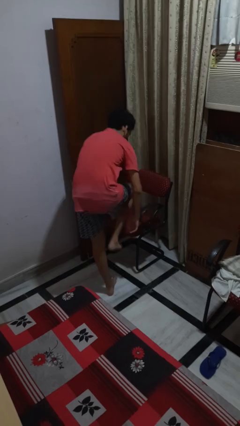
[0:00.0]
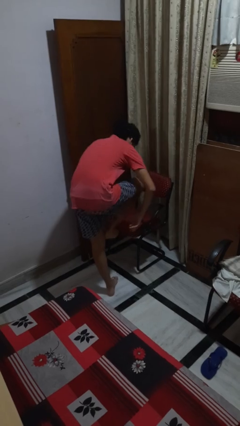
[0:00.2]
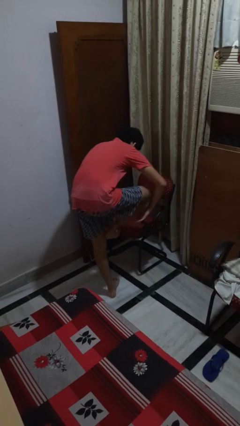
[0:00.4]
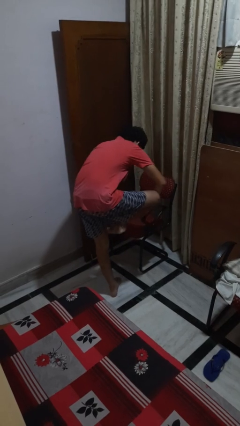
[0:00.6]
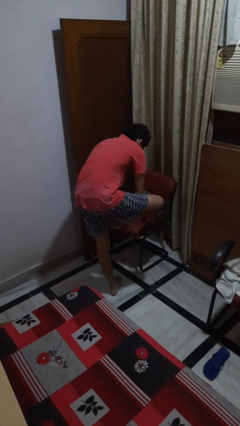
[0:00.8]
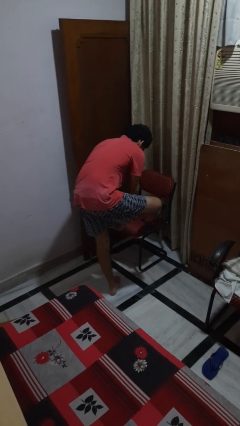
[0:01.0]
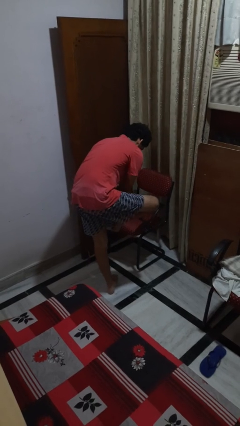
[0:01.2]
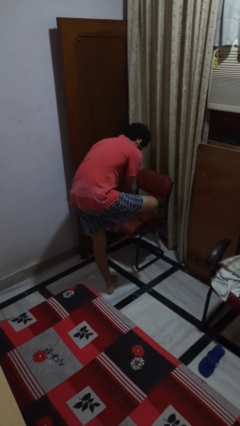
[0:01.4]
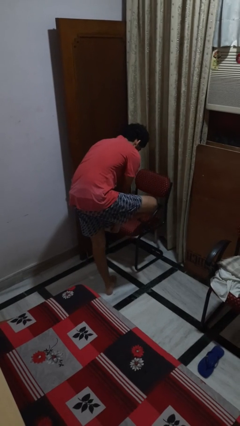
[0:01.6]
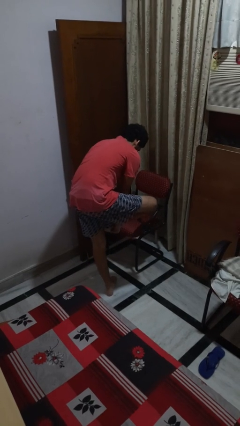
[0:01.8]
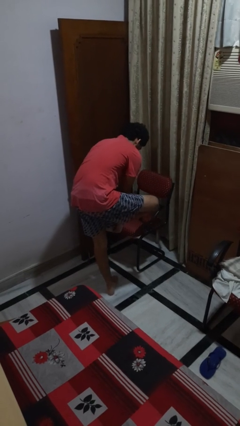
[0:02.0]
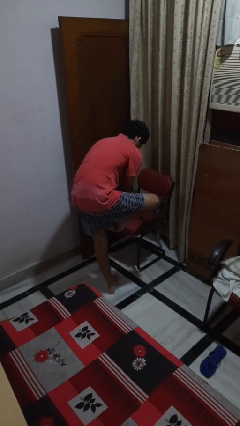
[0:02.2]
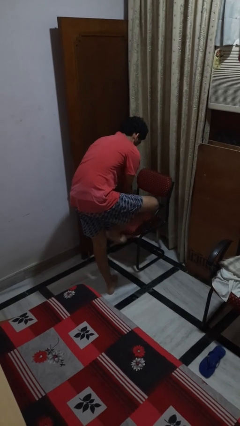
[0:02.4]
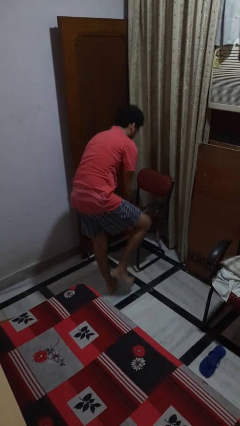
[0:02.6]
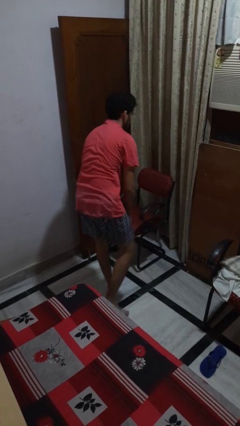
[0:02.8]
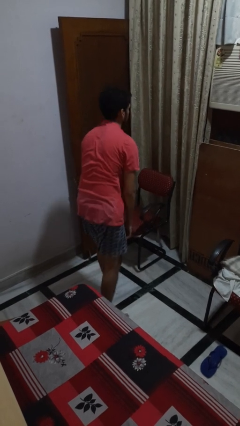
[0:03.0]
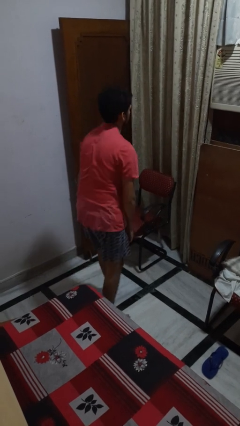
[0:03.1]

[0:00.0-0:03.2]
person stubs toe

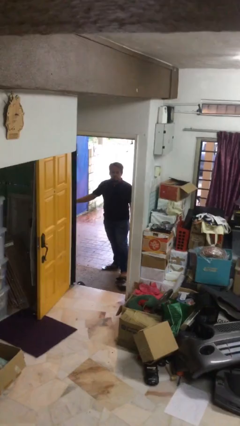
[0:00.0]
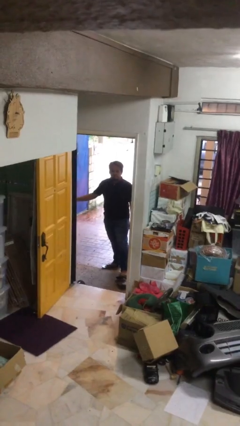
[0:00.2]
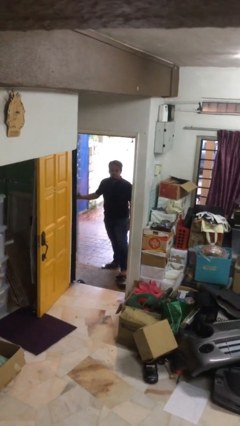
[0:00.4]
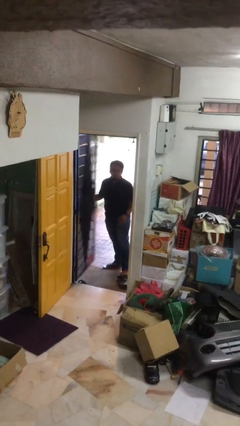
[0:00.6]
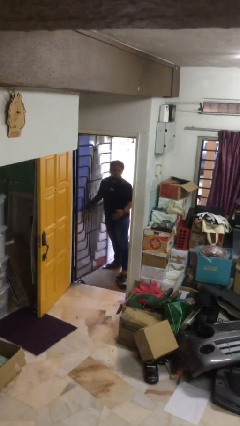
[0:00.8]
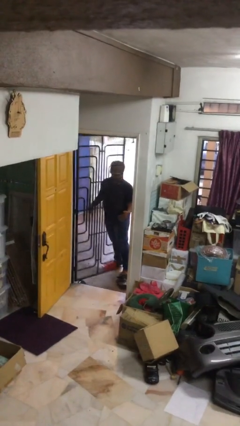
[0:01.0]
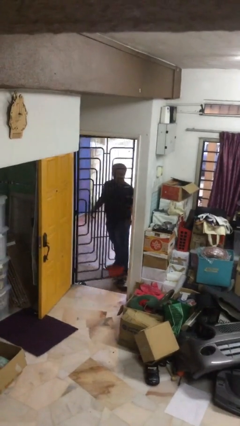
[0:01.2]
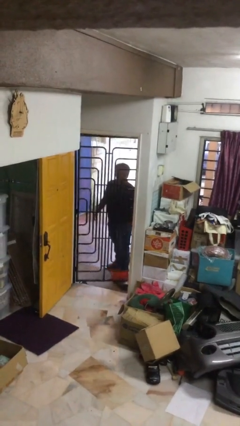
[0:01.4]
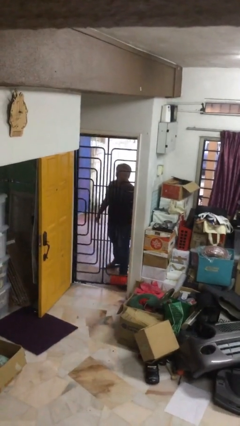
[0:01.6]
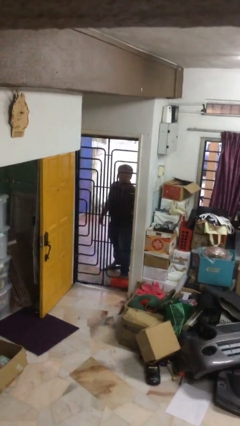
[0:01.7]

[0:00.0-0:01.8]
person closes facility door

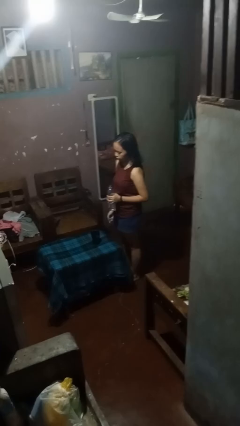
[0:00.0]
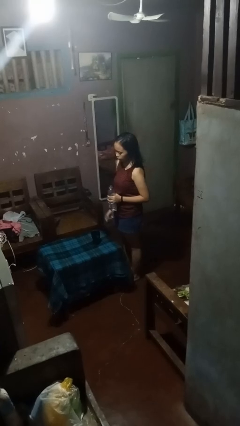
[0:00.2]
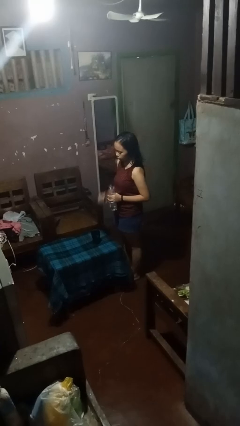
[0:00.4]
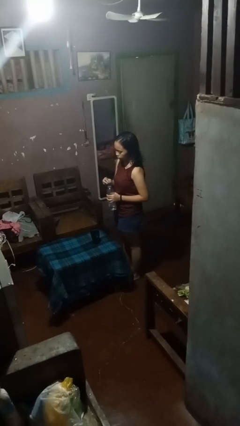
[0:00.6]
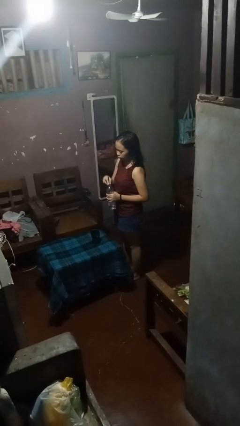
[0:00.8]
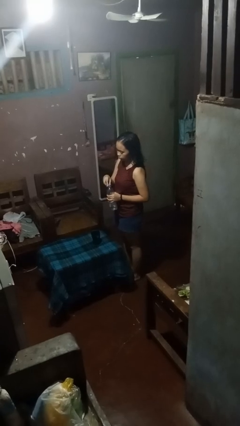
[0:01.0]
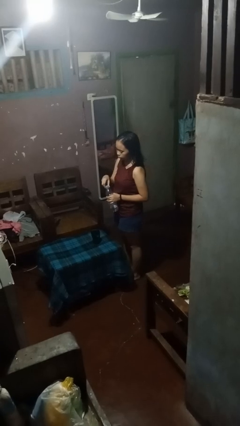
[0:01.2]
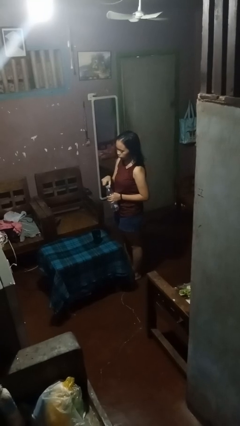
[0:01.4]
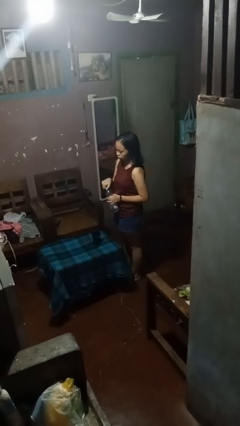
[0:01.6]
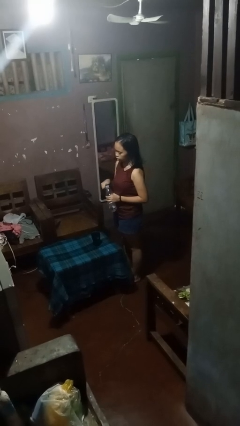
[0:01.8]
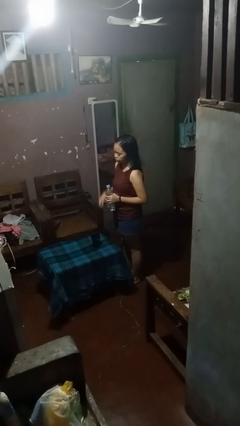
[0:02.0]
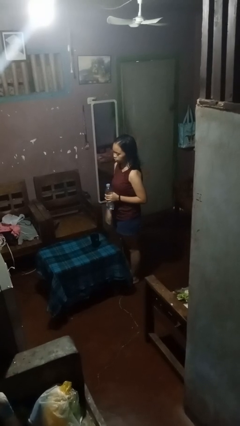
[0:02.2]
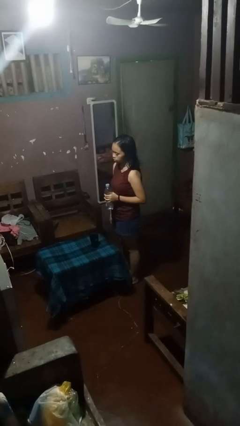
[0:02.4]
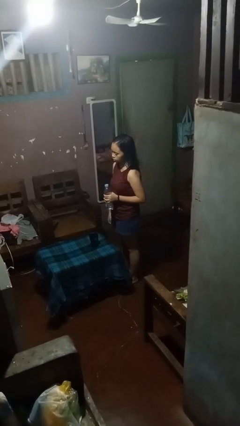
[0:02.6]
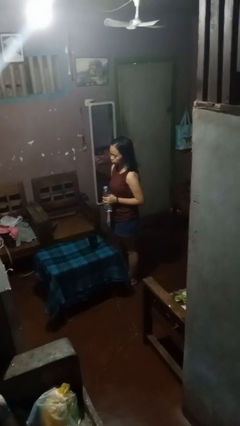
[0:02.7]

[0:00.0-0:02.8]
person screws lid to bottle

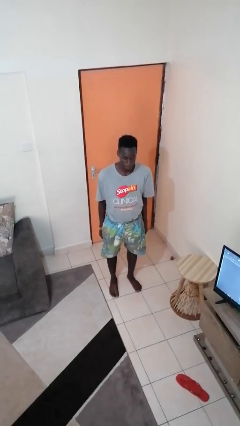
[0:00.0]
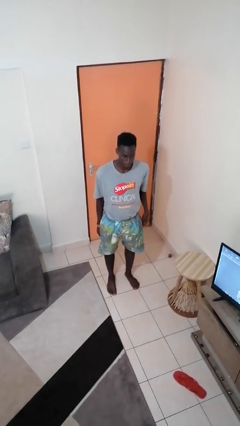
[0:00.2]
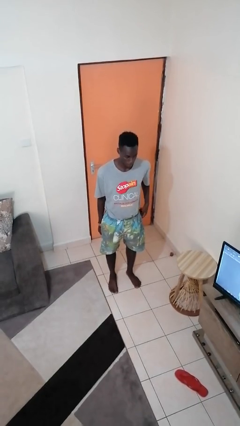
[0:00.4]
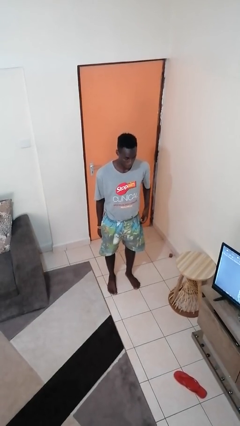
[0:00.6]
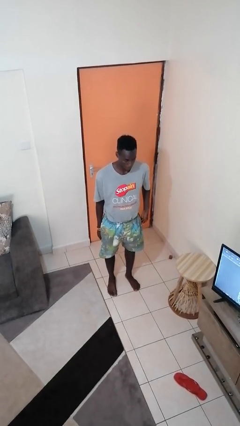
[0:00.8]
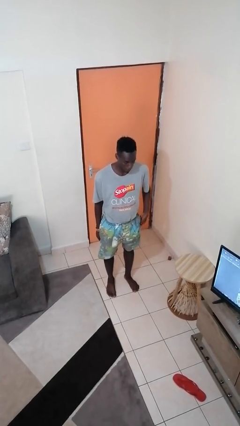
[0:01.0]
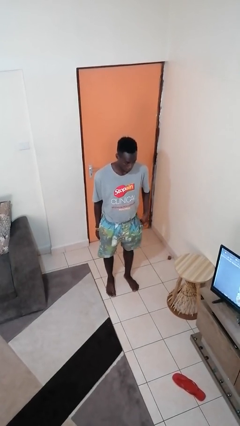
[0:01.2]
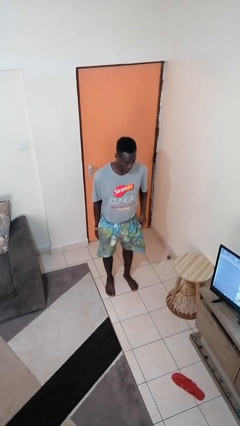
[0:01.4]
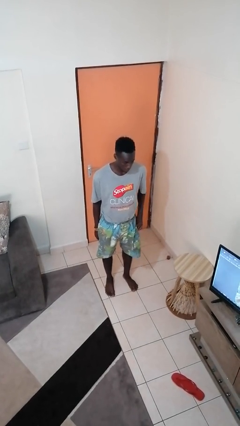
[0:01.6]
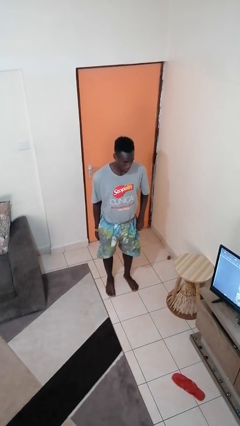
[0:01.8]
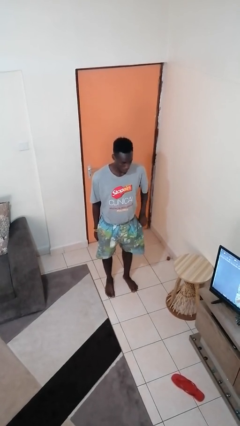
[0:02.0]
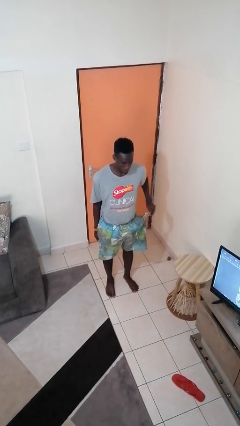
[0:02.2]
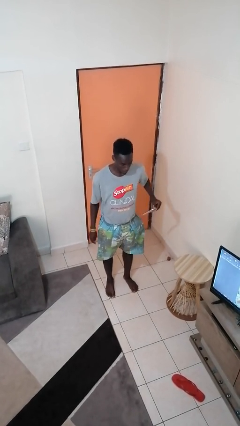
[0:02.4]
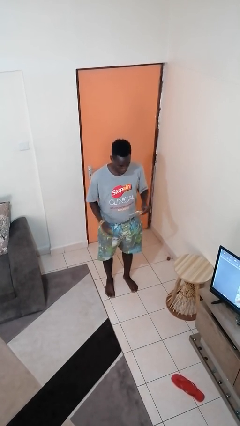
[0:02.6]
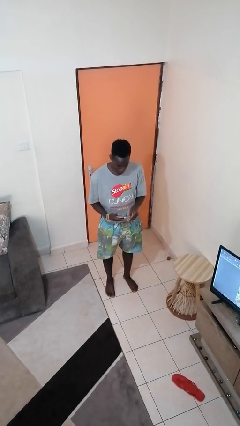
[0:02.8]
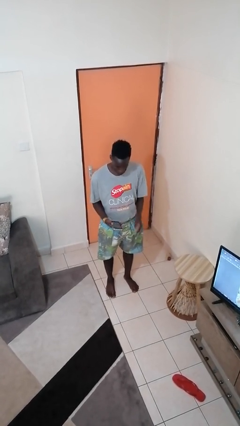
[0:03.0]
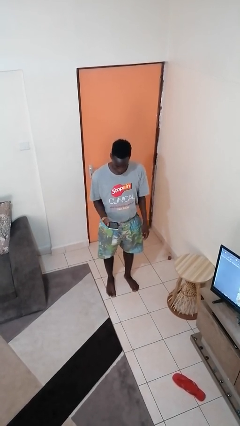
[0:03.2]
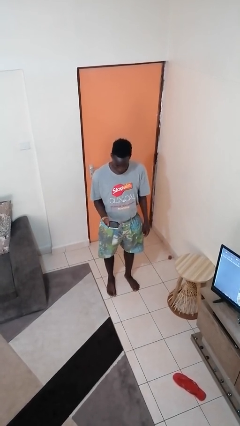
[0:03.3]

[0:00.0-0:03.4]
person takes phone from pocket

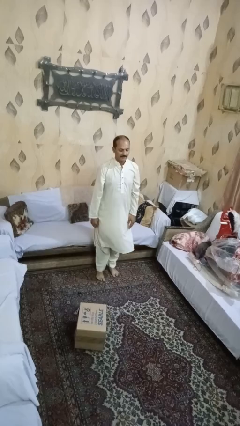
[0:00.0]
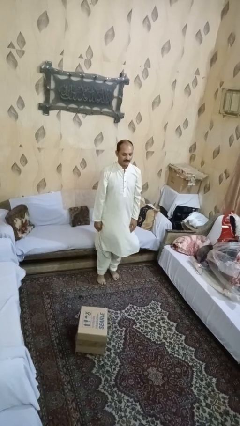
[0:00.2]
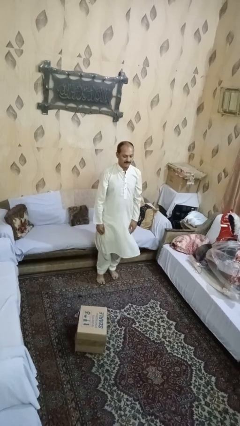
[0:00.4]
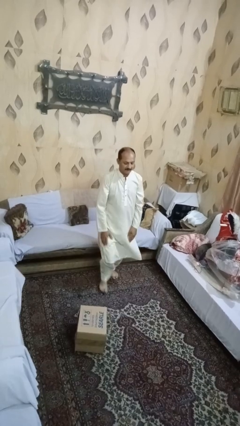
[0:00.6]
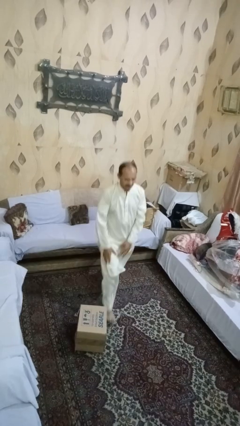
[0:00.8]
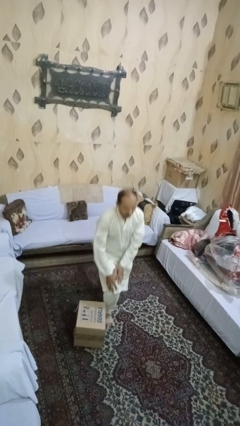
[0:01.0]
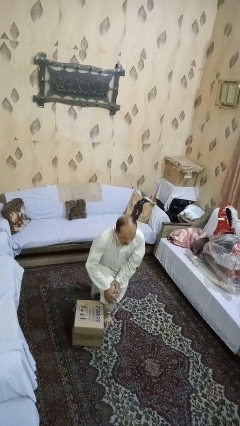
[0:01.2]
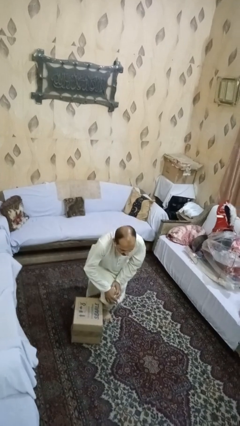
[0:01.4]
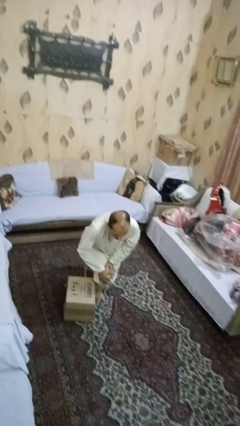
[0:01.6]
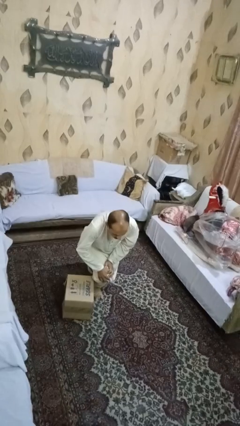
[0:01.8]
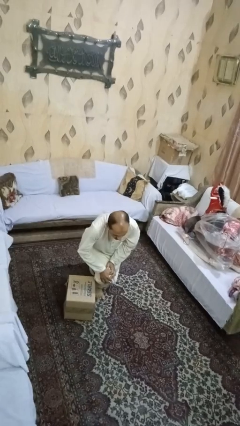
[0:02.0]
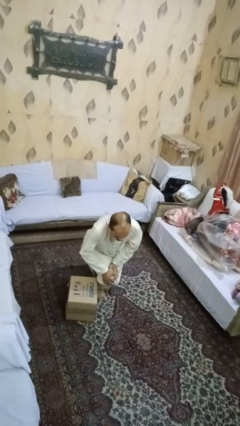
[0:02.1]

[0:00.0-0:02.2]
person trips on object on floor

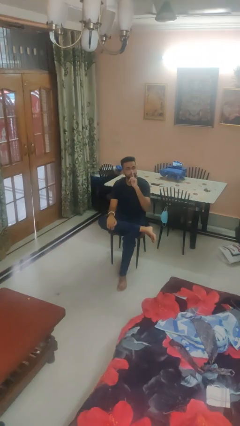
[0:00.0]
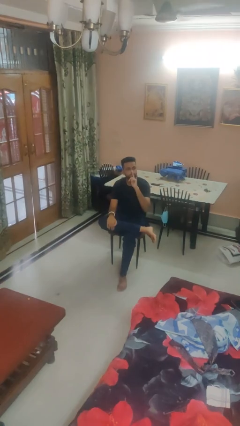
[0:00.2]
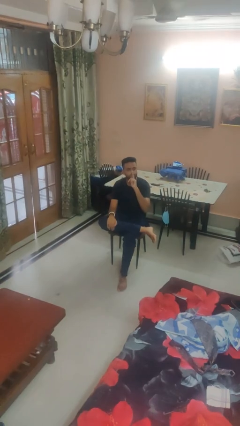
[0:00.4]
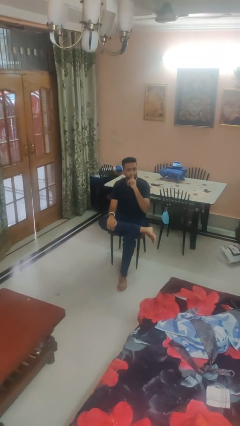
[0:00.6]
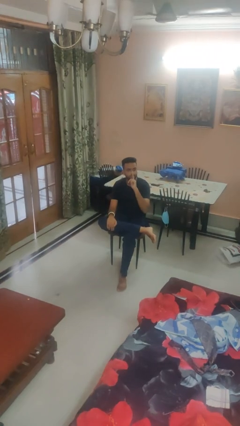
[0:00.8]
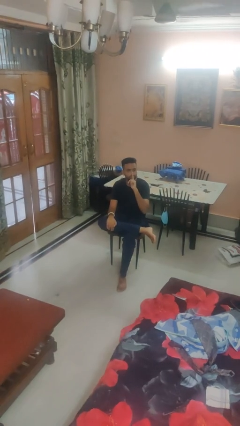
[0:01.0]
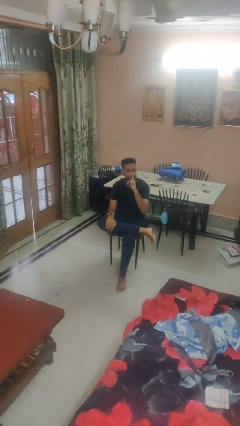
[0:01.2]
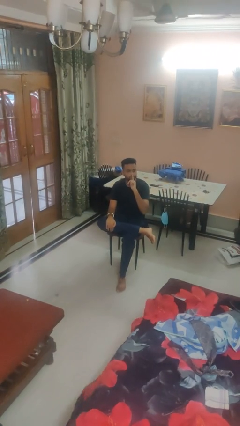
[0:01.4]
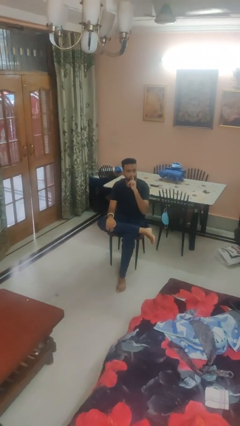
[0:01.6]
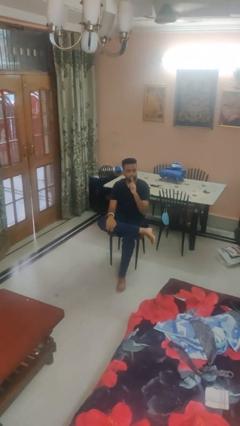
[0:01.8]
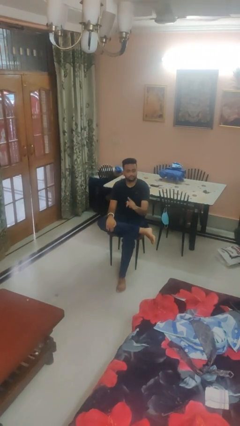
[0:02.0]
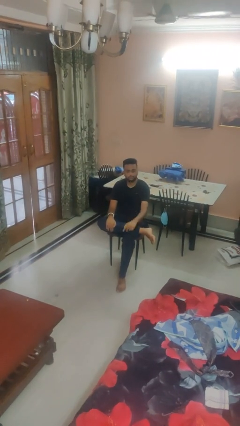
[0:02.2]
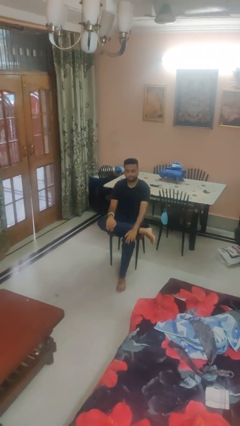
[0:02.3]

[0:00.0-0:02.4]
person gestures be quiet

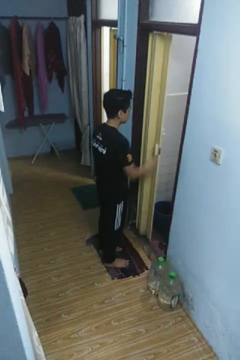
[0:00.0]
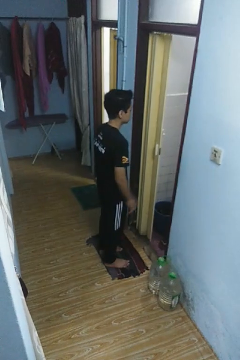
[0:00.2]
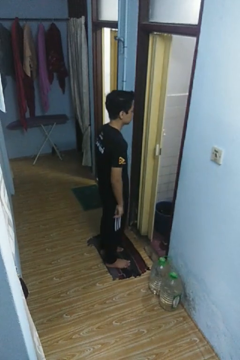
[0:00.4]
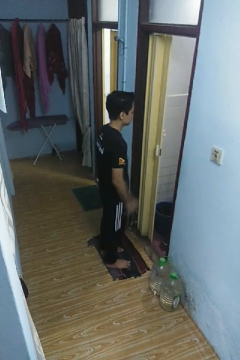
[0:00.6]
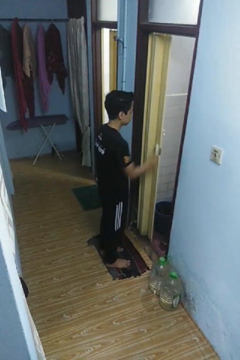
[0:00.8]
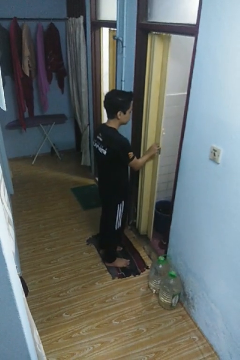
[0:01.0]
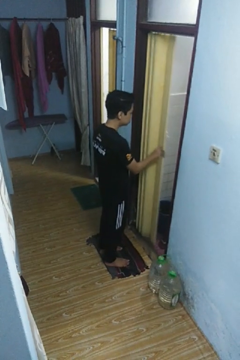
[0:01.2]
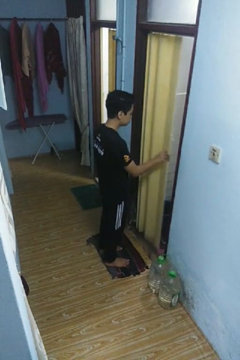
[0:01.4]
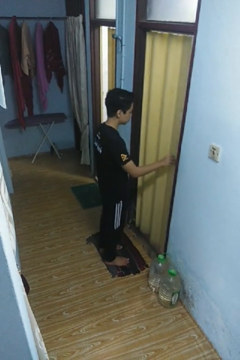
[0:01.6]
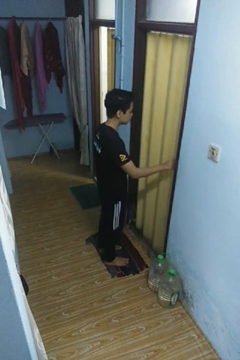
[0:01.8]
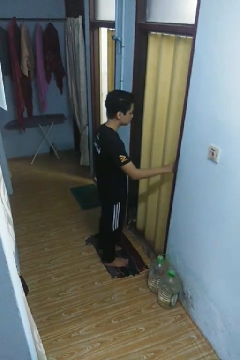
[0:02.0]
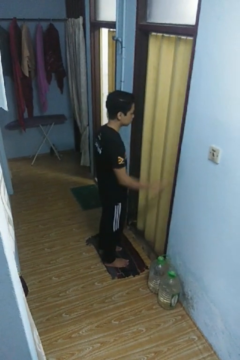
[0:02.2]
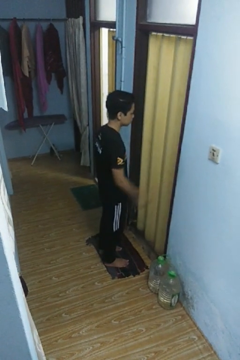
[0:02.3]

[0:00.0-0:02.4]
person closes sliding door
